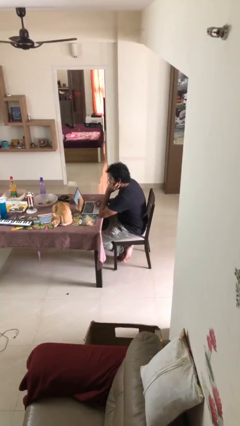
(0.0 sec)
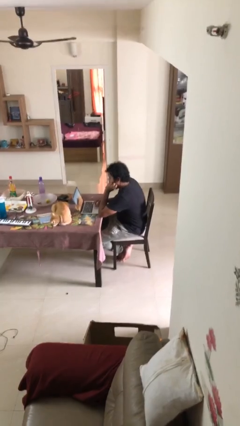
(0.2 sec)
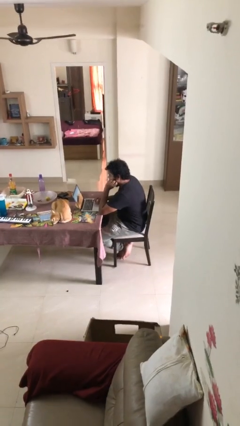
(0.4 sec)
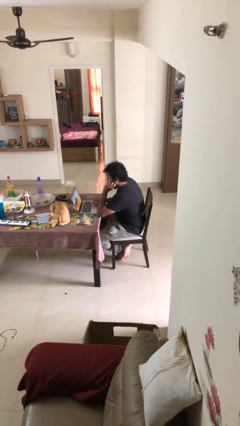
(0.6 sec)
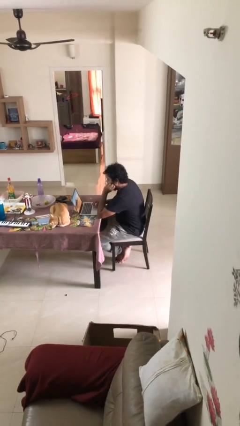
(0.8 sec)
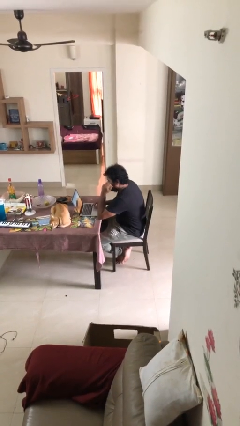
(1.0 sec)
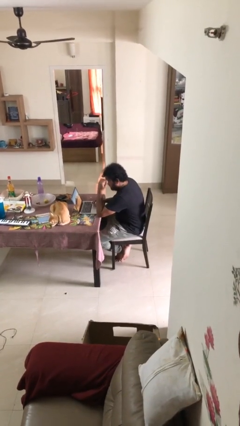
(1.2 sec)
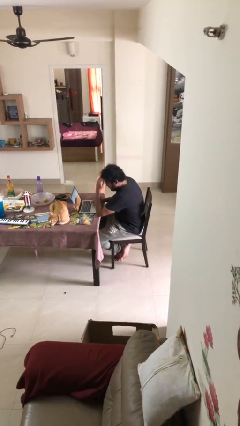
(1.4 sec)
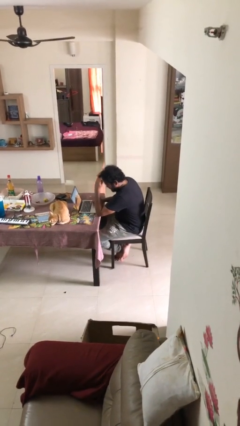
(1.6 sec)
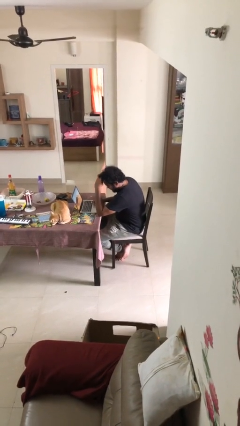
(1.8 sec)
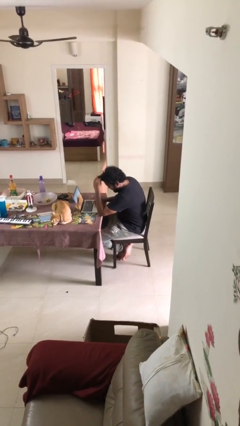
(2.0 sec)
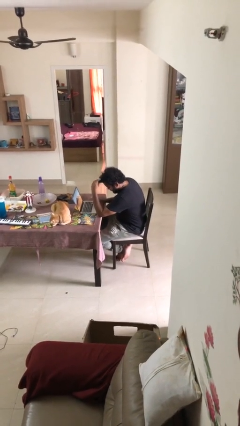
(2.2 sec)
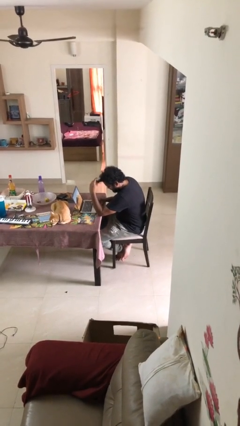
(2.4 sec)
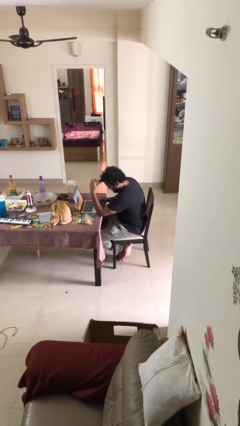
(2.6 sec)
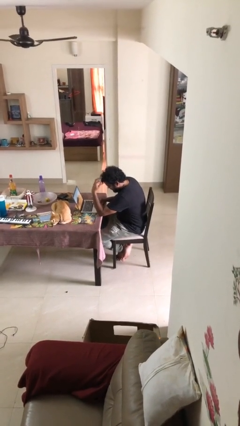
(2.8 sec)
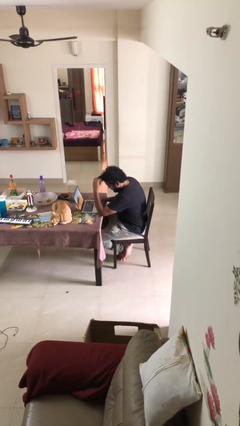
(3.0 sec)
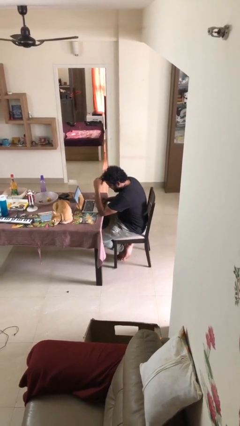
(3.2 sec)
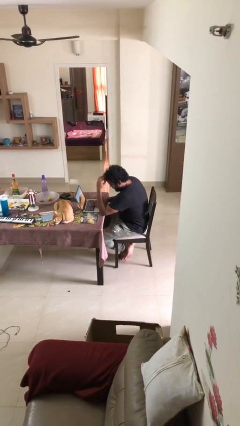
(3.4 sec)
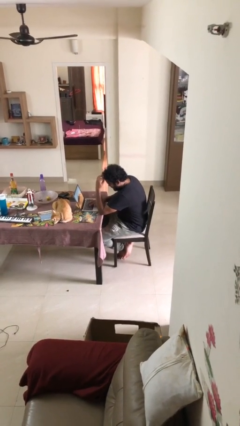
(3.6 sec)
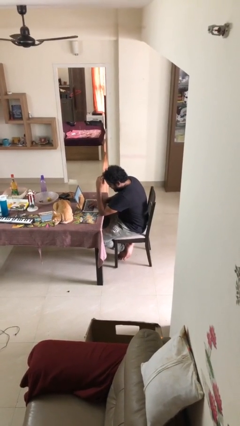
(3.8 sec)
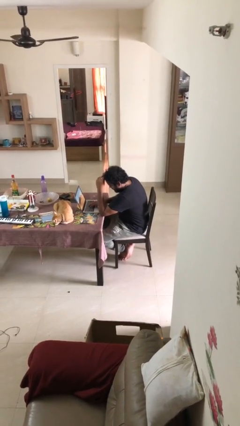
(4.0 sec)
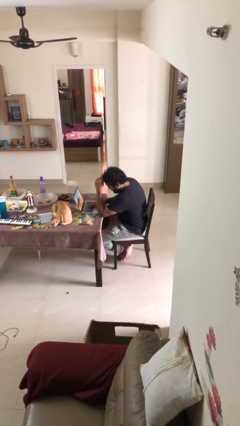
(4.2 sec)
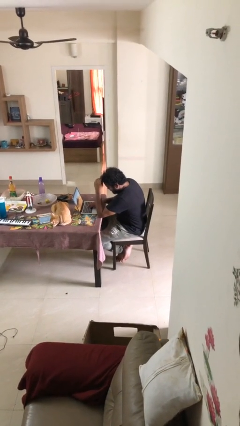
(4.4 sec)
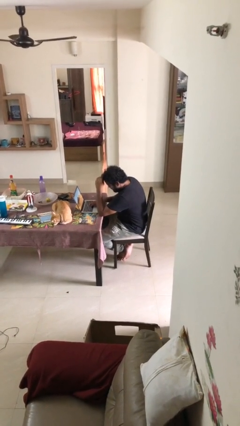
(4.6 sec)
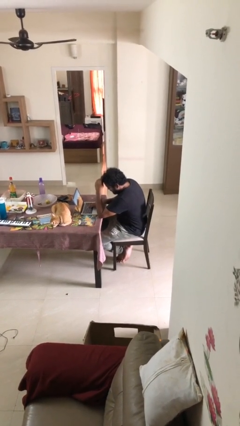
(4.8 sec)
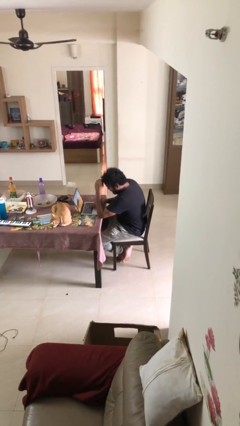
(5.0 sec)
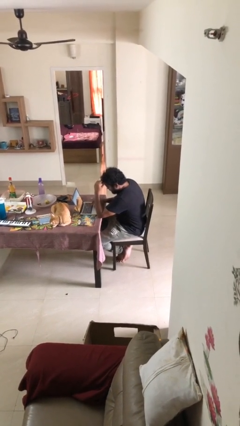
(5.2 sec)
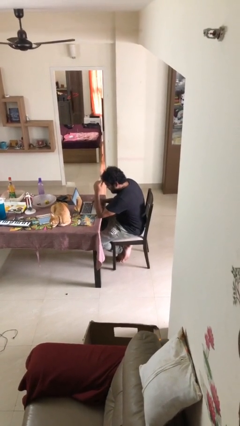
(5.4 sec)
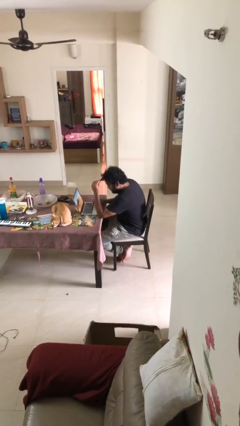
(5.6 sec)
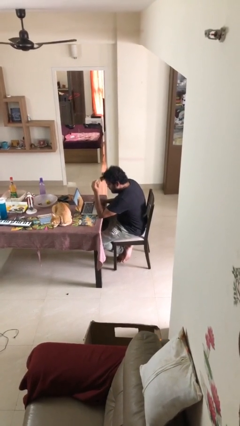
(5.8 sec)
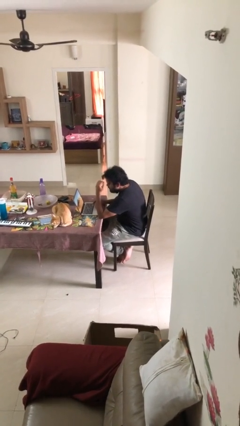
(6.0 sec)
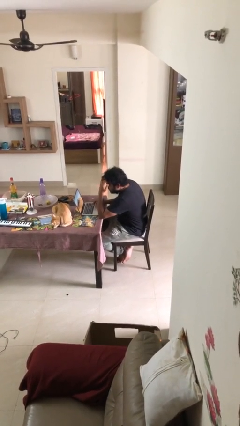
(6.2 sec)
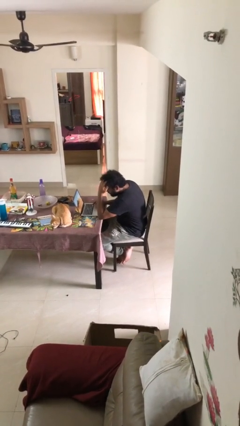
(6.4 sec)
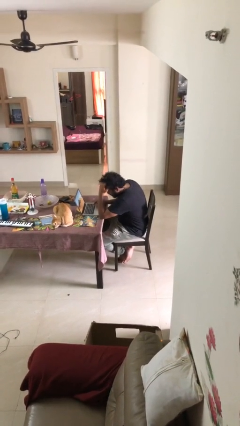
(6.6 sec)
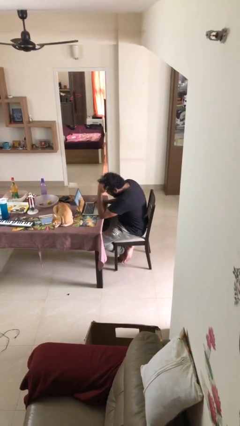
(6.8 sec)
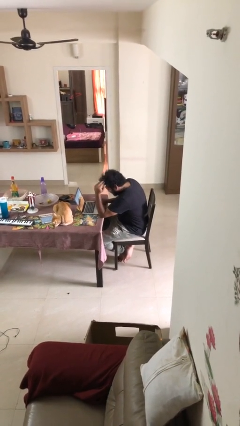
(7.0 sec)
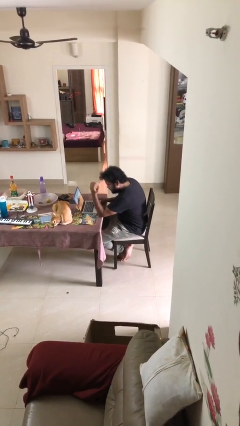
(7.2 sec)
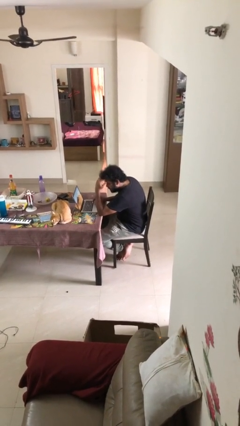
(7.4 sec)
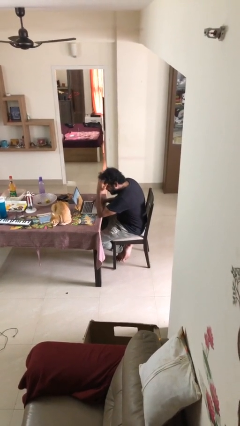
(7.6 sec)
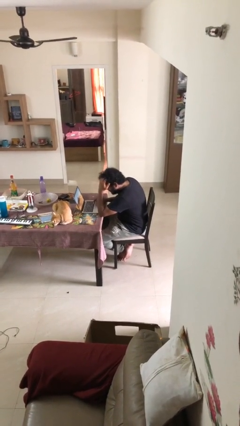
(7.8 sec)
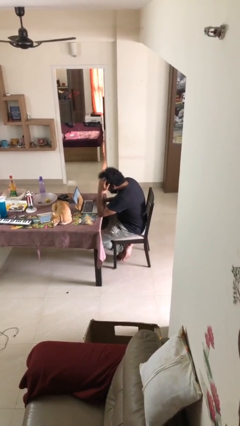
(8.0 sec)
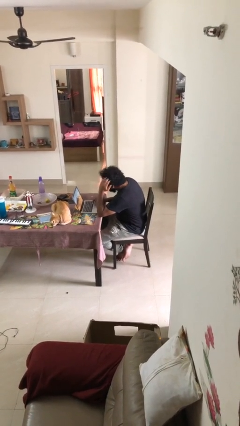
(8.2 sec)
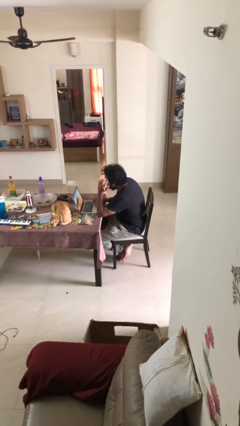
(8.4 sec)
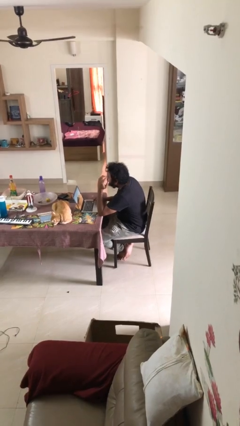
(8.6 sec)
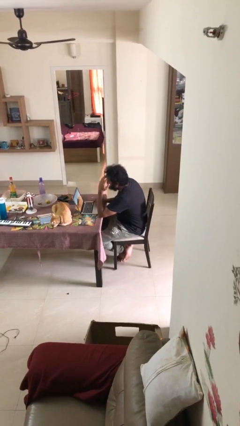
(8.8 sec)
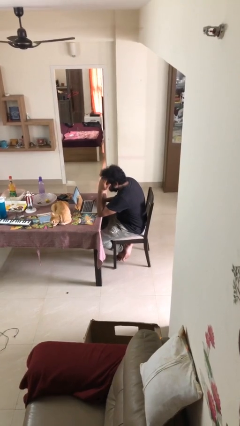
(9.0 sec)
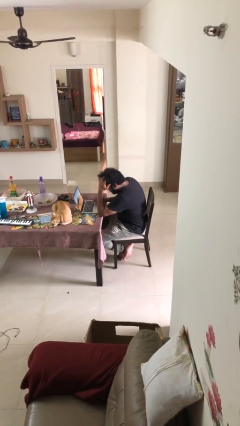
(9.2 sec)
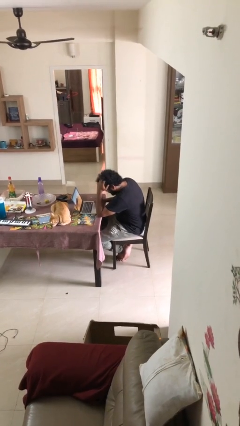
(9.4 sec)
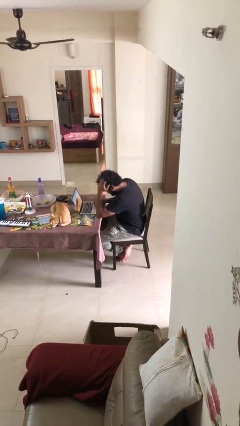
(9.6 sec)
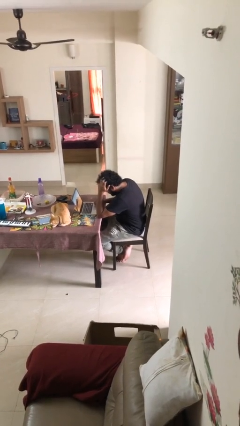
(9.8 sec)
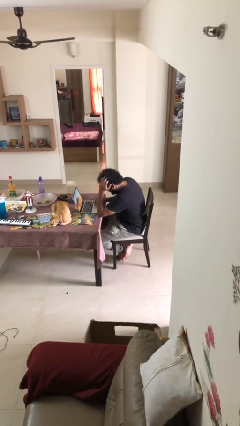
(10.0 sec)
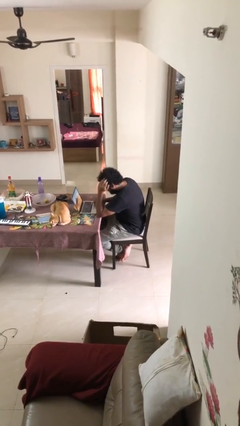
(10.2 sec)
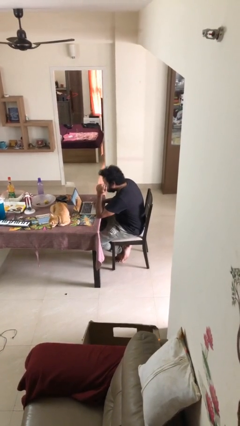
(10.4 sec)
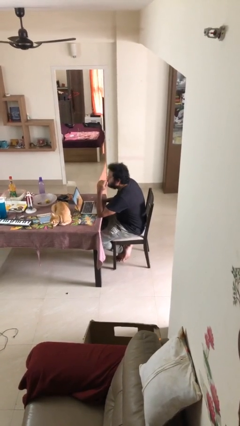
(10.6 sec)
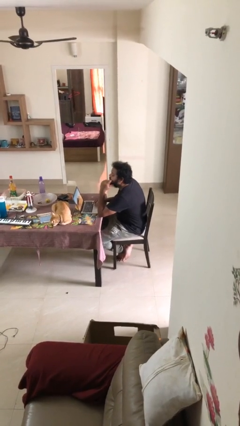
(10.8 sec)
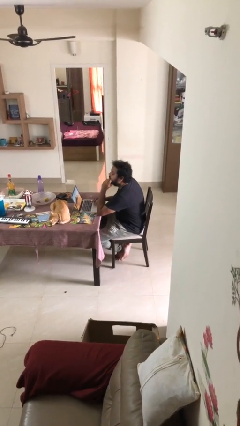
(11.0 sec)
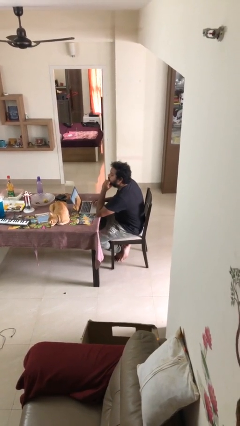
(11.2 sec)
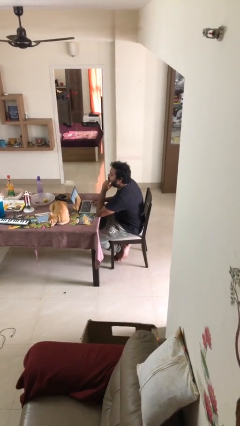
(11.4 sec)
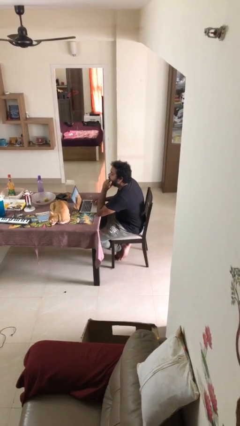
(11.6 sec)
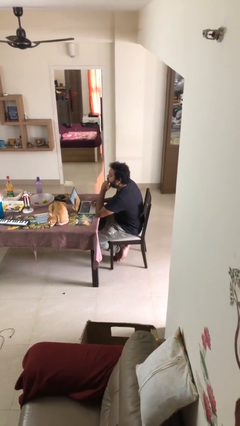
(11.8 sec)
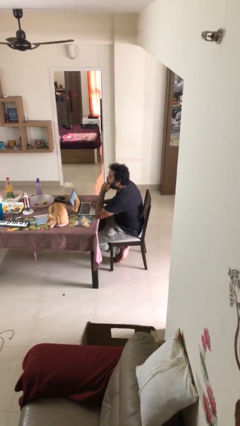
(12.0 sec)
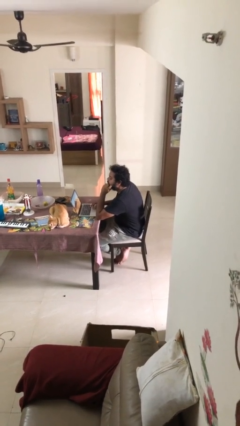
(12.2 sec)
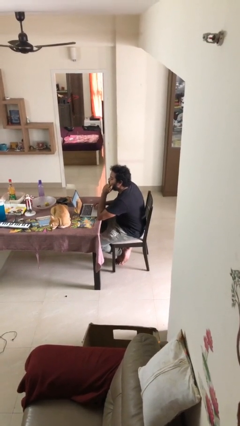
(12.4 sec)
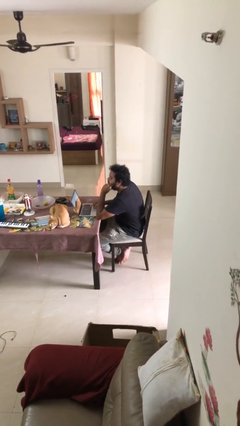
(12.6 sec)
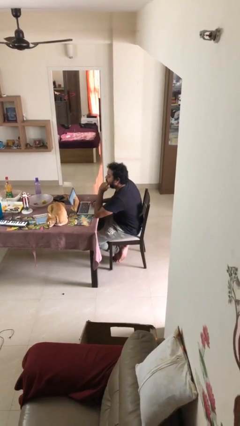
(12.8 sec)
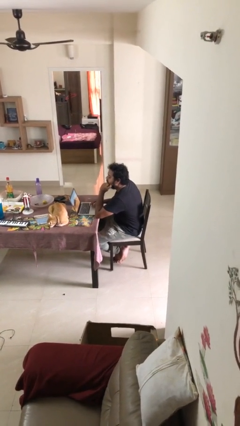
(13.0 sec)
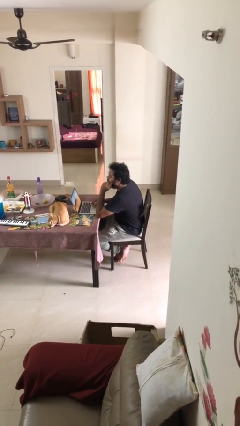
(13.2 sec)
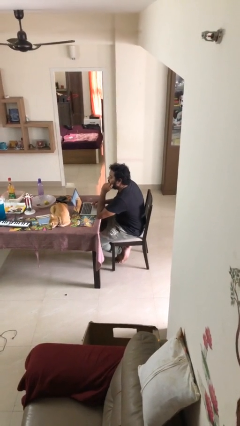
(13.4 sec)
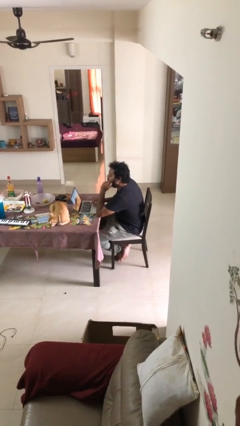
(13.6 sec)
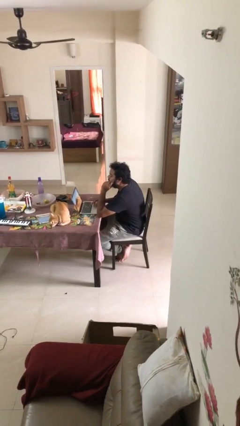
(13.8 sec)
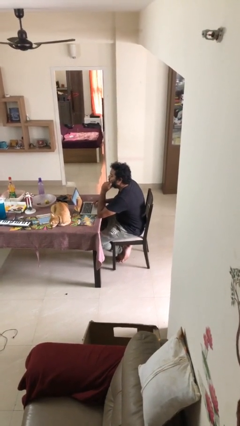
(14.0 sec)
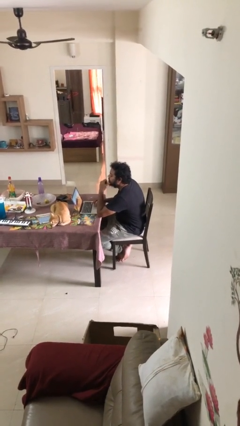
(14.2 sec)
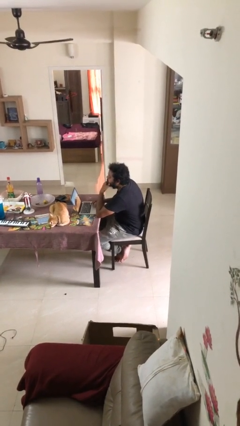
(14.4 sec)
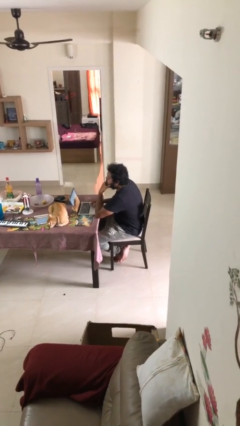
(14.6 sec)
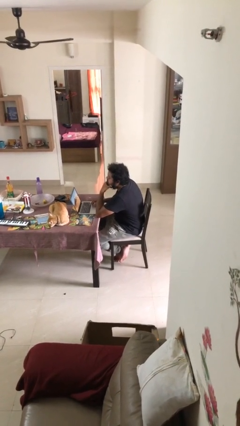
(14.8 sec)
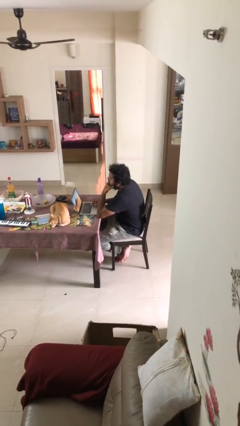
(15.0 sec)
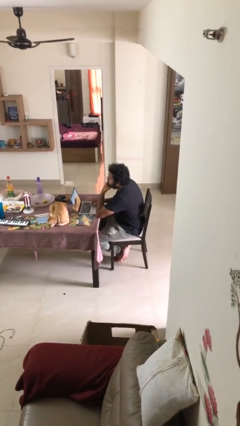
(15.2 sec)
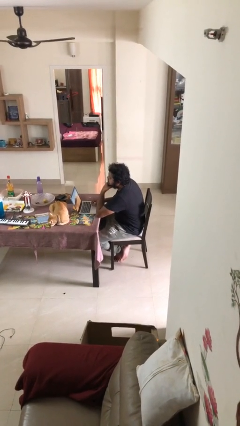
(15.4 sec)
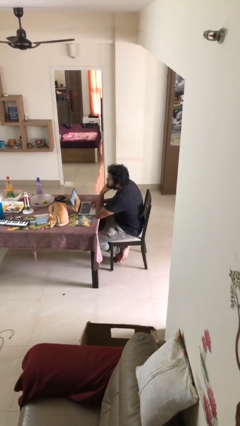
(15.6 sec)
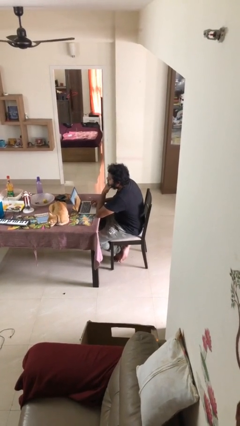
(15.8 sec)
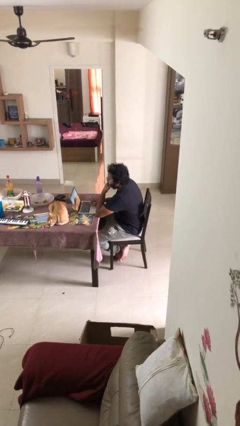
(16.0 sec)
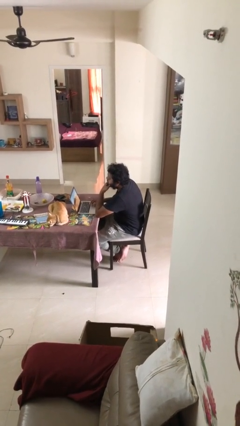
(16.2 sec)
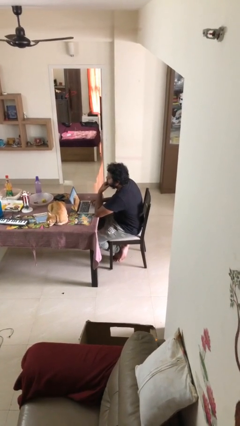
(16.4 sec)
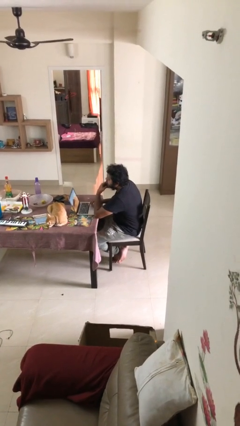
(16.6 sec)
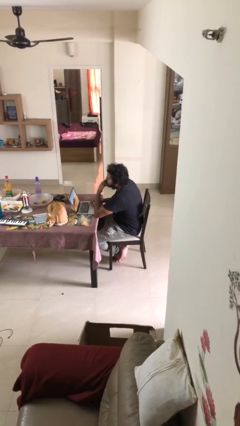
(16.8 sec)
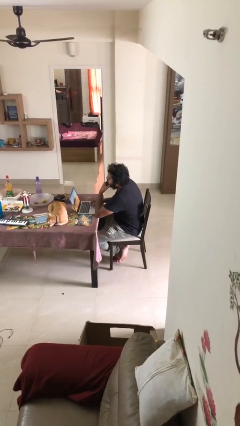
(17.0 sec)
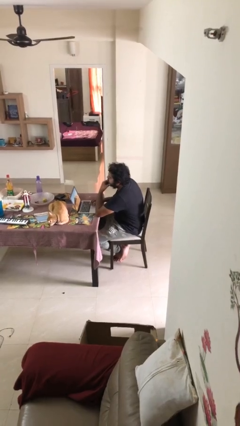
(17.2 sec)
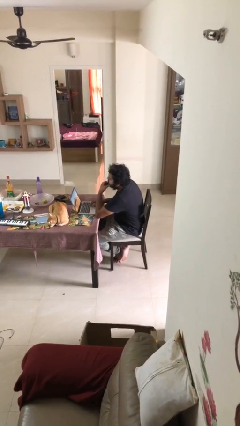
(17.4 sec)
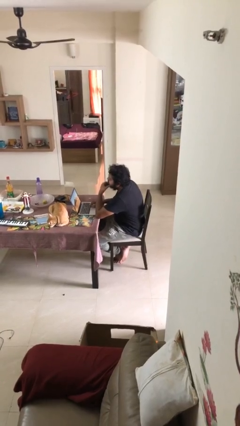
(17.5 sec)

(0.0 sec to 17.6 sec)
person interacts with laptop

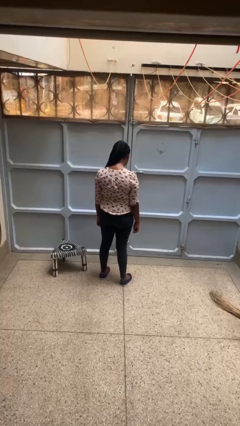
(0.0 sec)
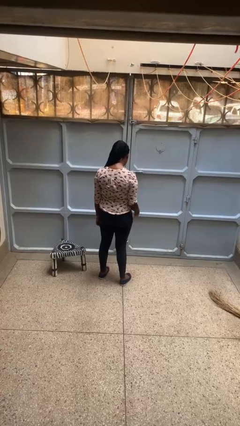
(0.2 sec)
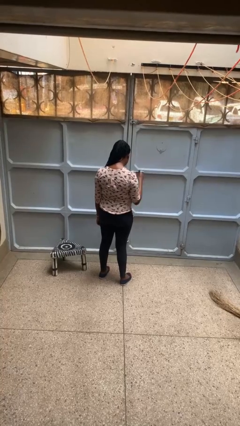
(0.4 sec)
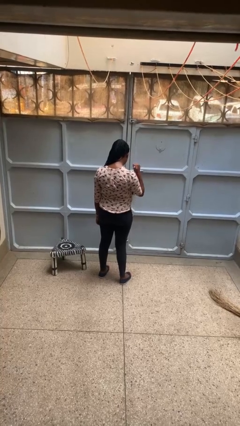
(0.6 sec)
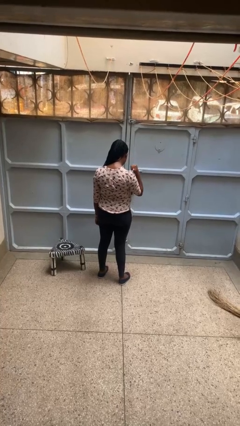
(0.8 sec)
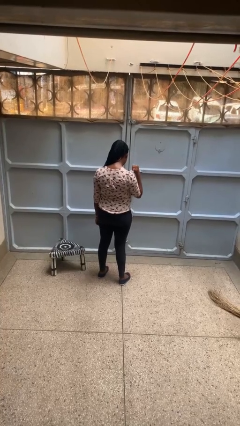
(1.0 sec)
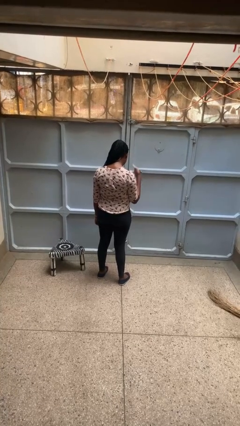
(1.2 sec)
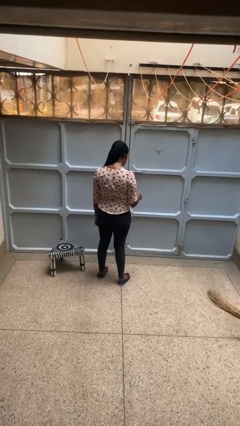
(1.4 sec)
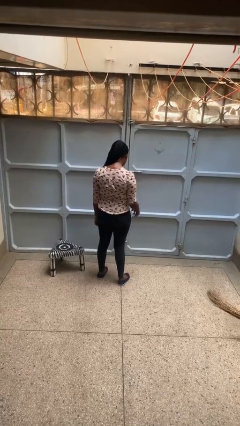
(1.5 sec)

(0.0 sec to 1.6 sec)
person gestures behind me
